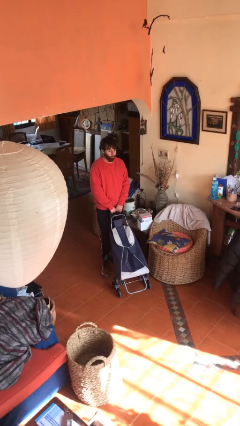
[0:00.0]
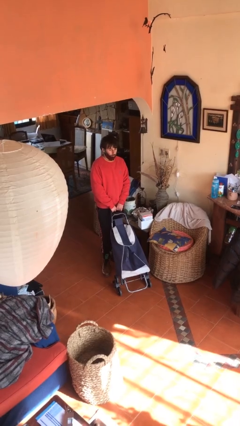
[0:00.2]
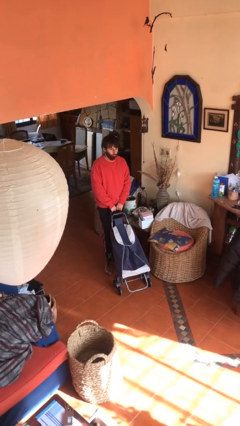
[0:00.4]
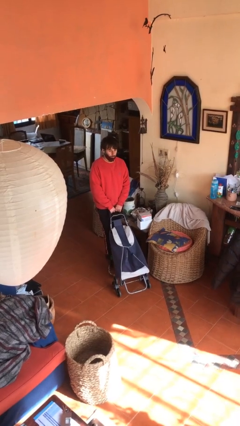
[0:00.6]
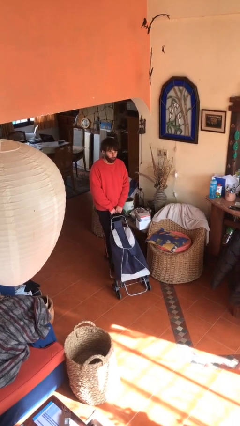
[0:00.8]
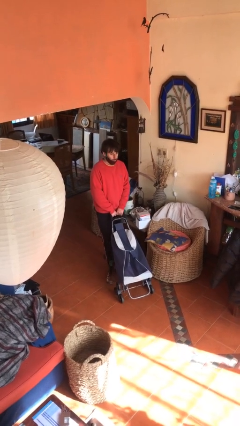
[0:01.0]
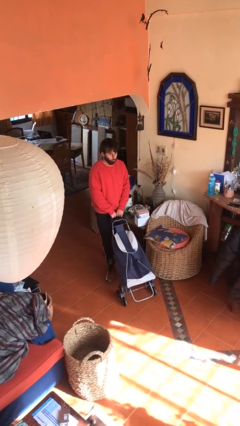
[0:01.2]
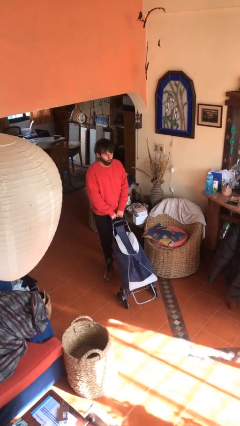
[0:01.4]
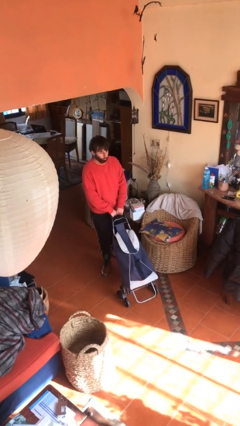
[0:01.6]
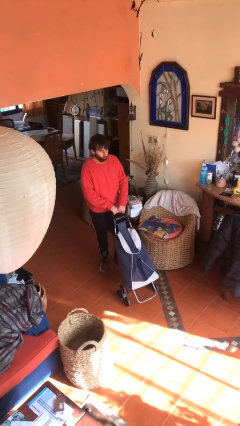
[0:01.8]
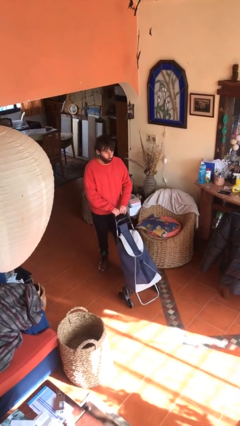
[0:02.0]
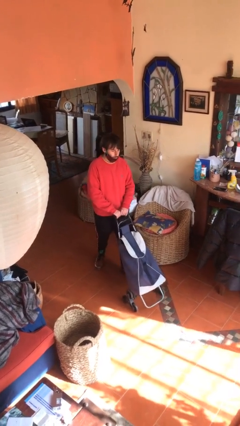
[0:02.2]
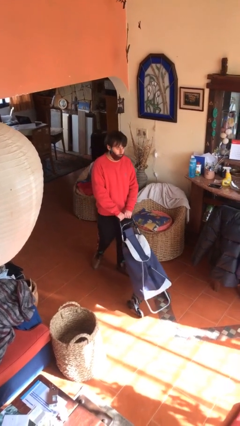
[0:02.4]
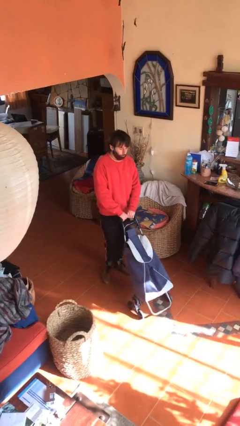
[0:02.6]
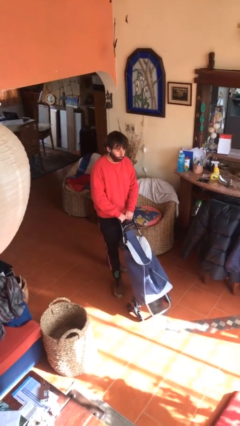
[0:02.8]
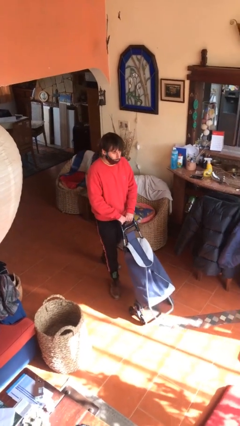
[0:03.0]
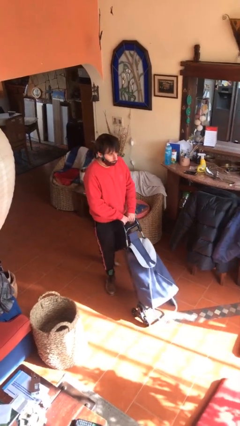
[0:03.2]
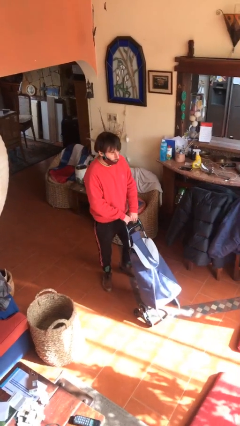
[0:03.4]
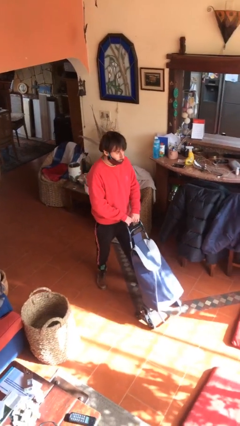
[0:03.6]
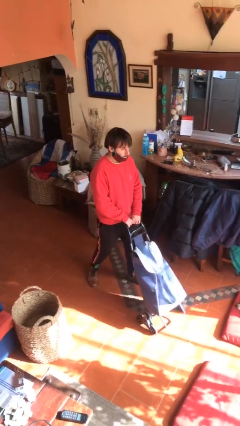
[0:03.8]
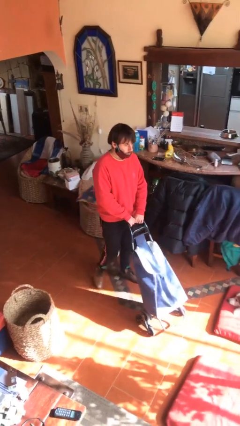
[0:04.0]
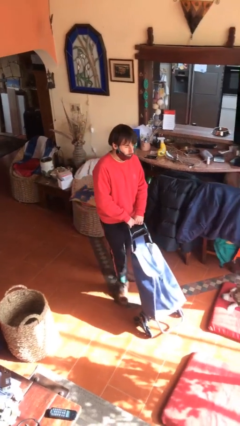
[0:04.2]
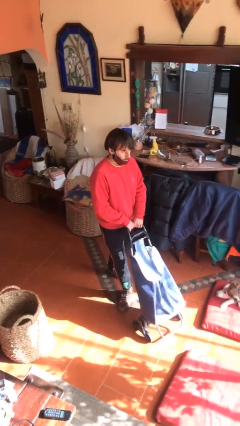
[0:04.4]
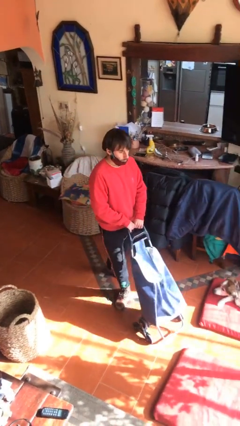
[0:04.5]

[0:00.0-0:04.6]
person pushes wheeled cart

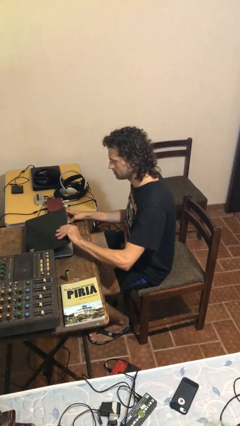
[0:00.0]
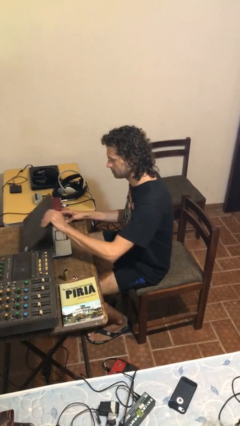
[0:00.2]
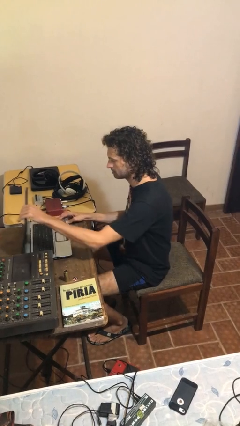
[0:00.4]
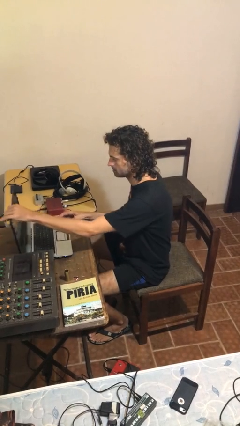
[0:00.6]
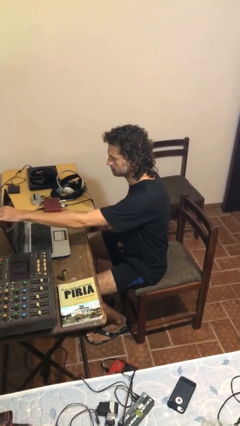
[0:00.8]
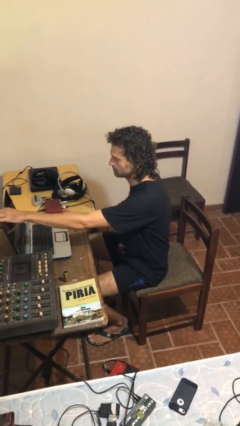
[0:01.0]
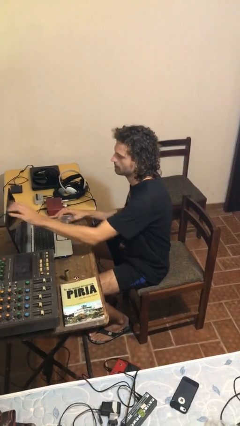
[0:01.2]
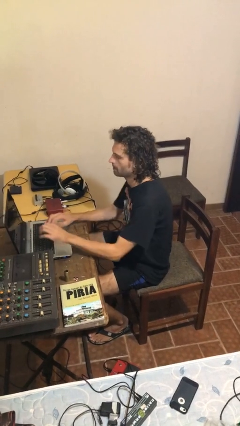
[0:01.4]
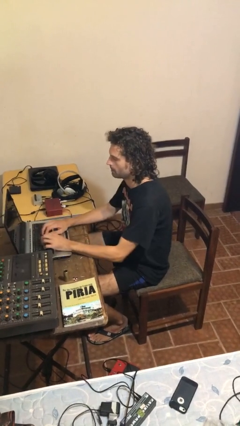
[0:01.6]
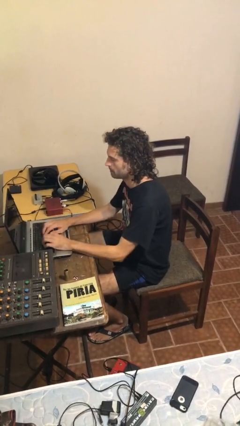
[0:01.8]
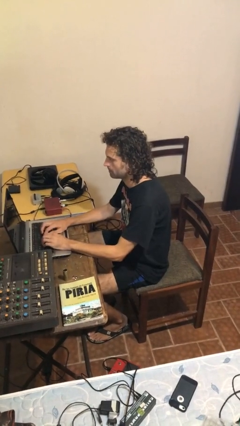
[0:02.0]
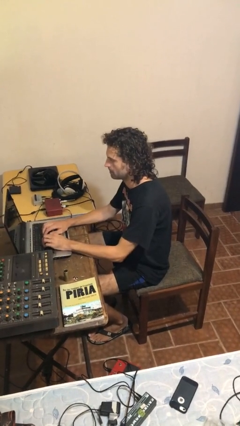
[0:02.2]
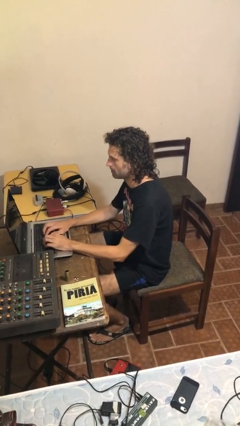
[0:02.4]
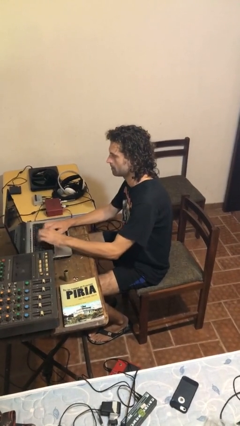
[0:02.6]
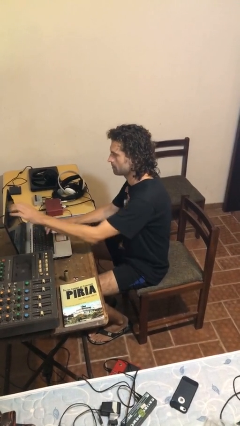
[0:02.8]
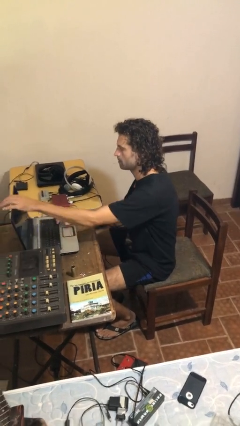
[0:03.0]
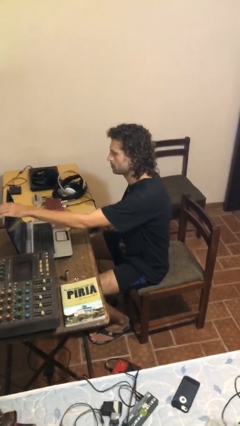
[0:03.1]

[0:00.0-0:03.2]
person interacts with laptop

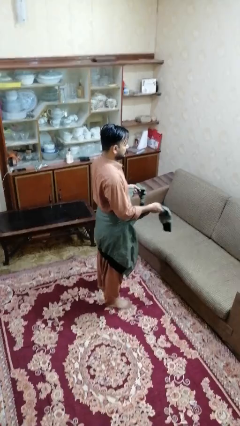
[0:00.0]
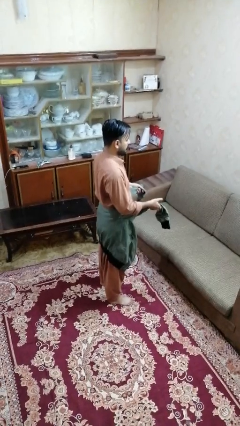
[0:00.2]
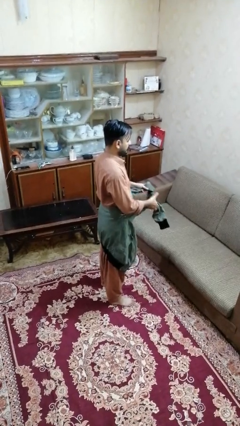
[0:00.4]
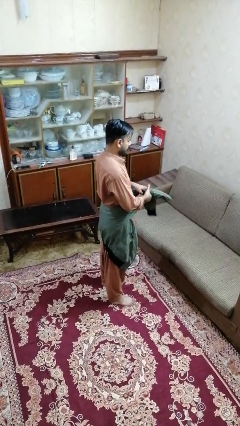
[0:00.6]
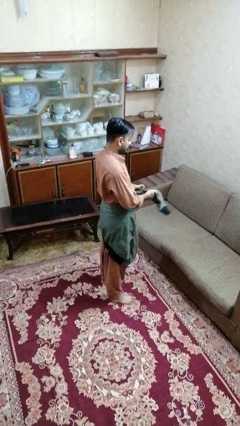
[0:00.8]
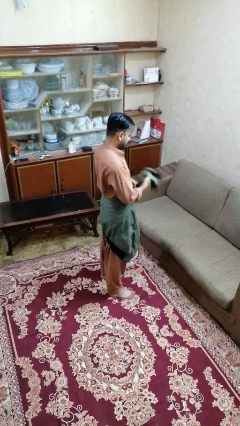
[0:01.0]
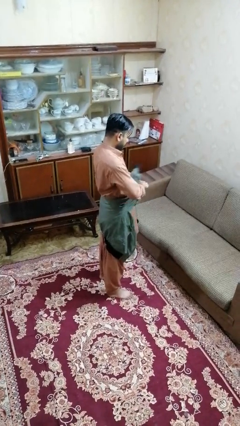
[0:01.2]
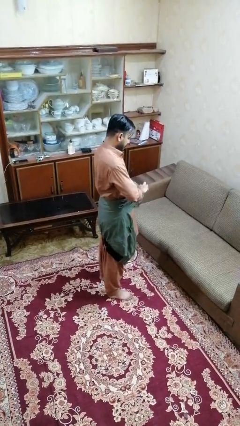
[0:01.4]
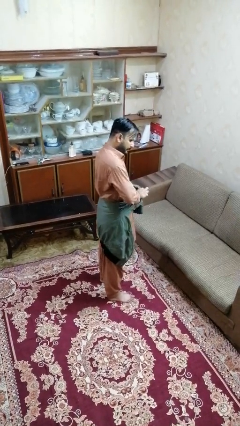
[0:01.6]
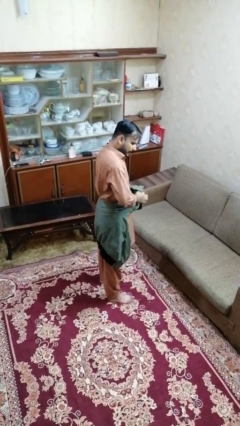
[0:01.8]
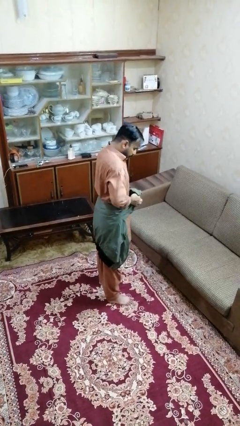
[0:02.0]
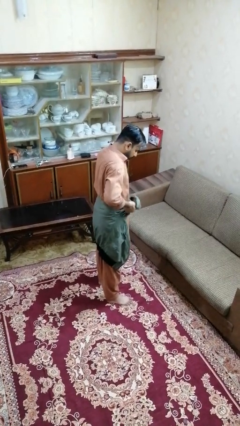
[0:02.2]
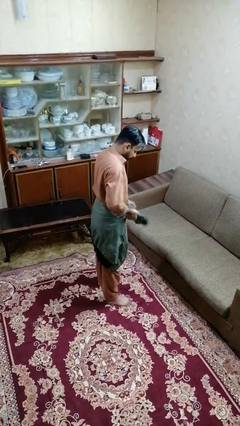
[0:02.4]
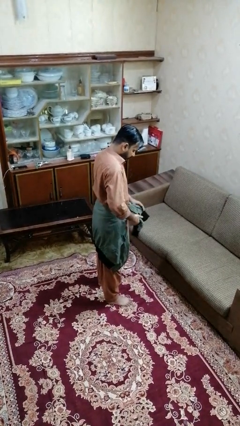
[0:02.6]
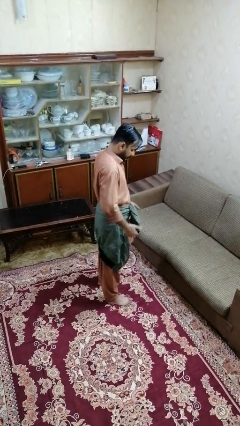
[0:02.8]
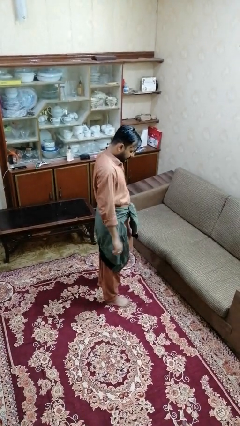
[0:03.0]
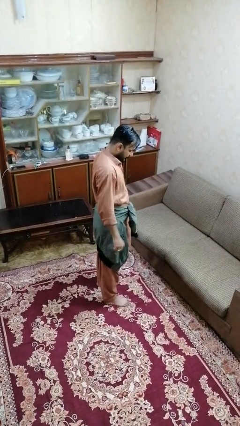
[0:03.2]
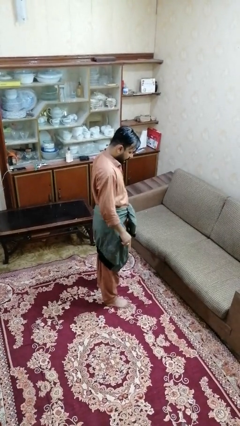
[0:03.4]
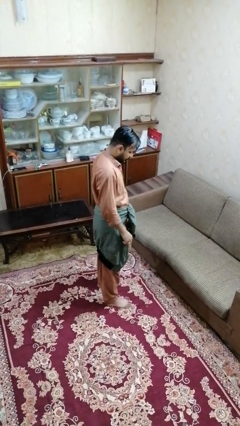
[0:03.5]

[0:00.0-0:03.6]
person ties jacket around waist

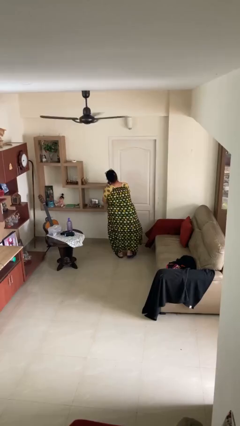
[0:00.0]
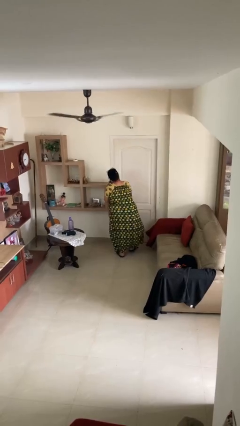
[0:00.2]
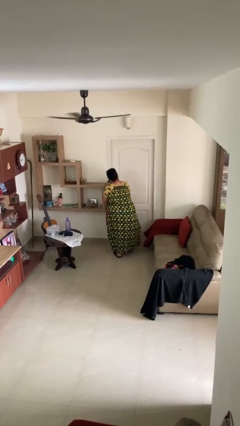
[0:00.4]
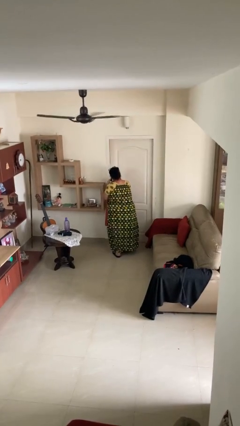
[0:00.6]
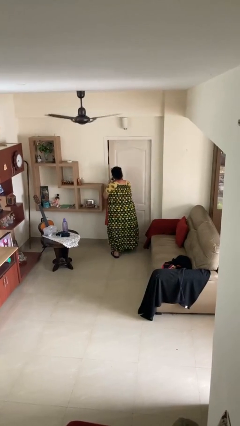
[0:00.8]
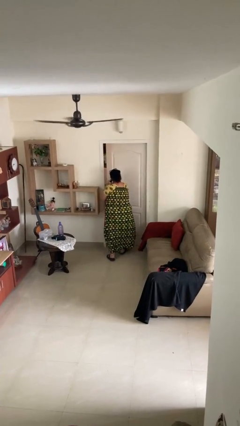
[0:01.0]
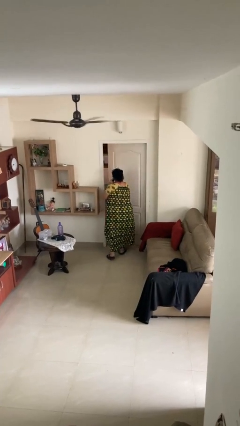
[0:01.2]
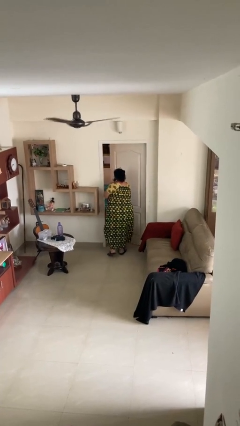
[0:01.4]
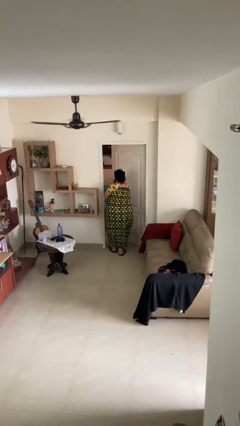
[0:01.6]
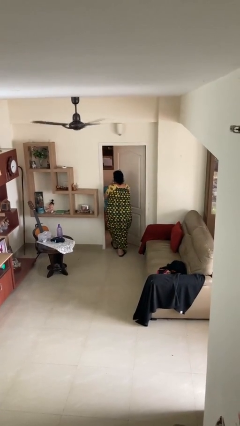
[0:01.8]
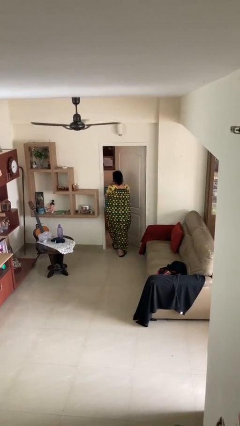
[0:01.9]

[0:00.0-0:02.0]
person opens facility door

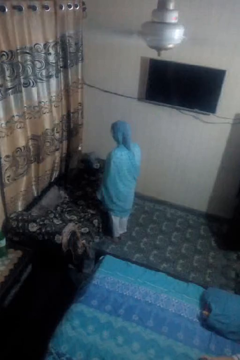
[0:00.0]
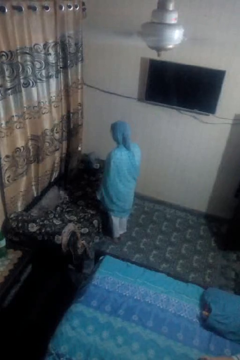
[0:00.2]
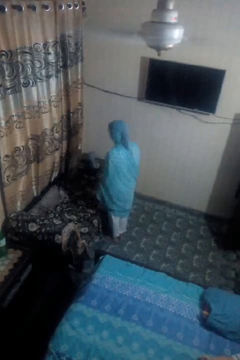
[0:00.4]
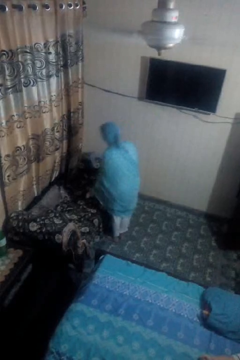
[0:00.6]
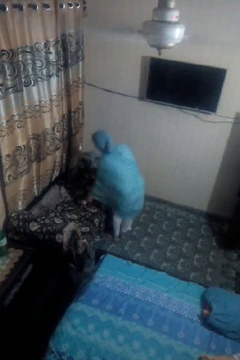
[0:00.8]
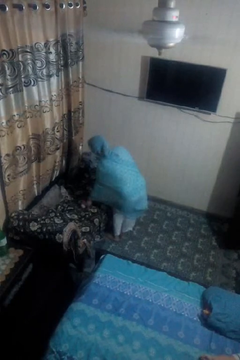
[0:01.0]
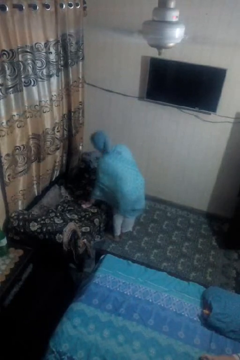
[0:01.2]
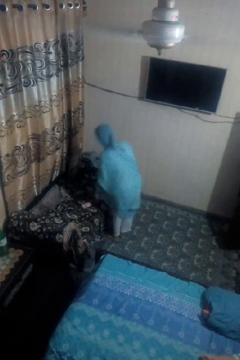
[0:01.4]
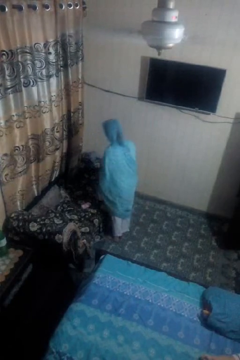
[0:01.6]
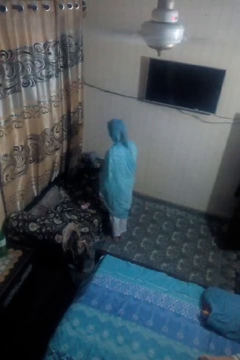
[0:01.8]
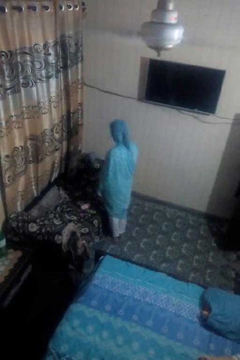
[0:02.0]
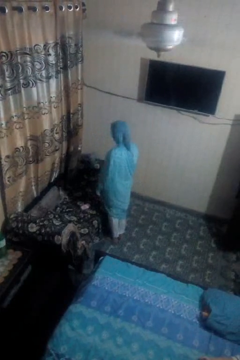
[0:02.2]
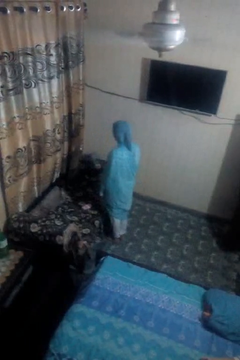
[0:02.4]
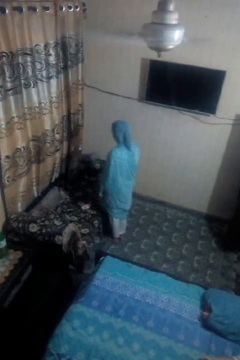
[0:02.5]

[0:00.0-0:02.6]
person puts down object on couch

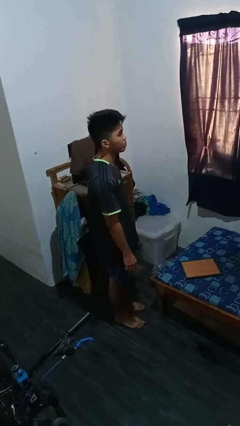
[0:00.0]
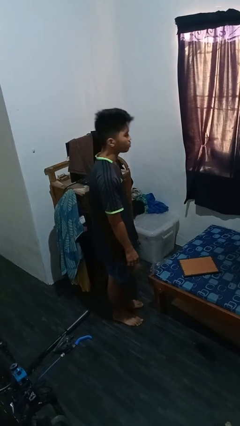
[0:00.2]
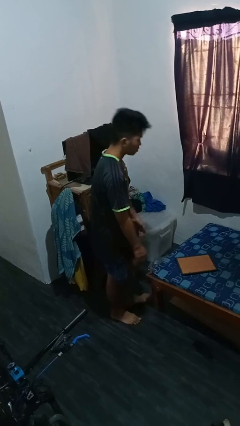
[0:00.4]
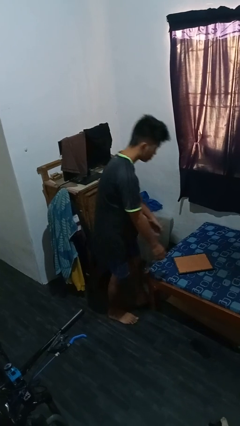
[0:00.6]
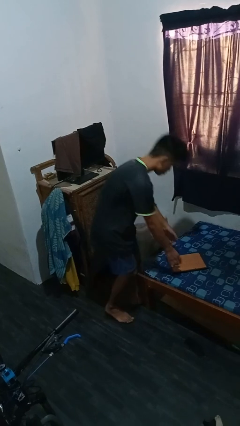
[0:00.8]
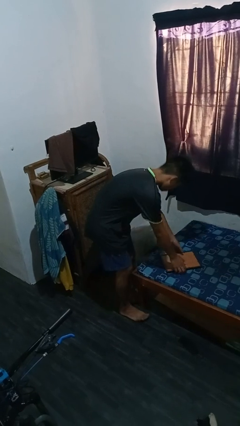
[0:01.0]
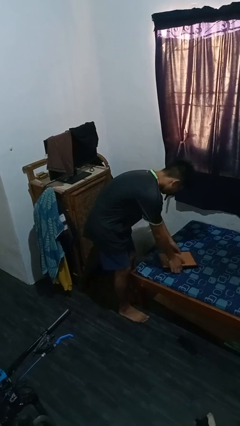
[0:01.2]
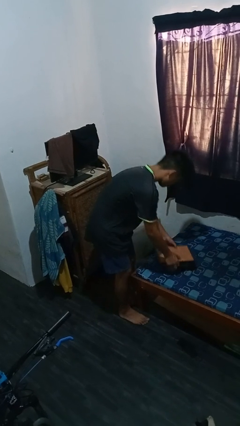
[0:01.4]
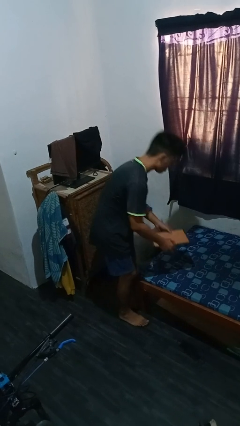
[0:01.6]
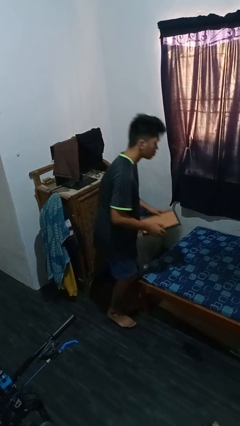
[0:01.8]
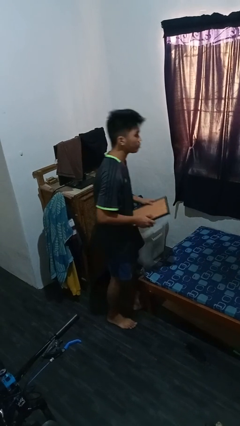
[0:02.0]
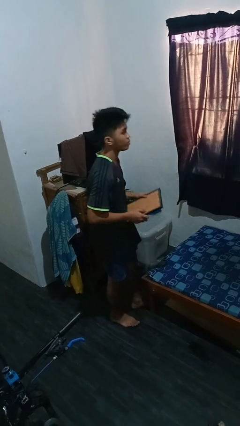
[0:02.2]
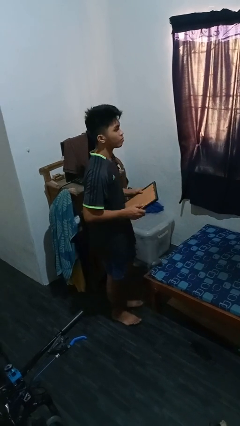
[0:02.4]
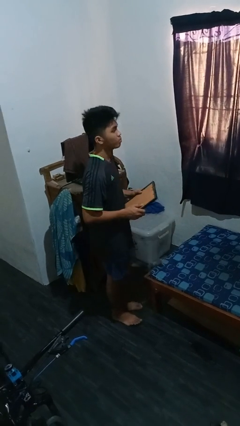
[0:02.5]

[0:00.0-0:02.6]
person picks up object from bed
